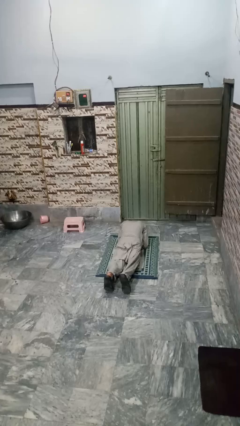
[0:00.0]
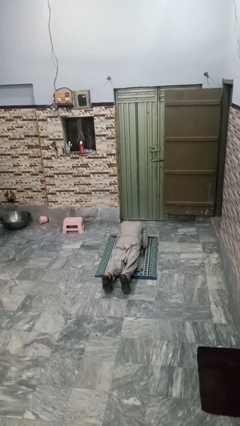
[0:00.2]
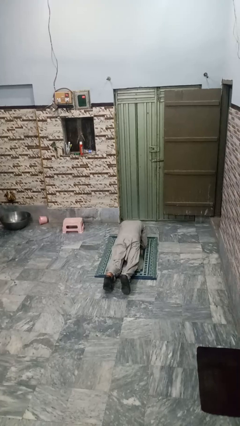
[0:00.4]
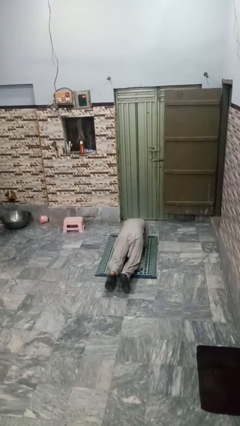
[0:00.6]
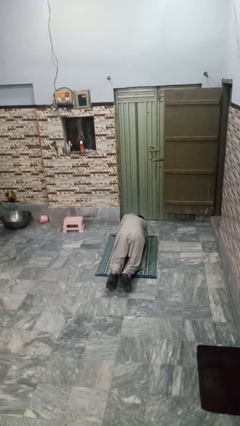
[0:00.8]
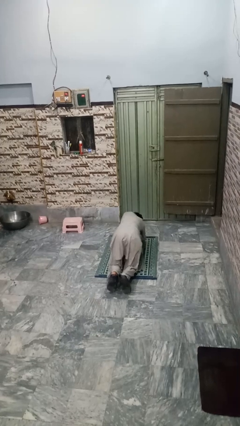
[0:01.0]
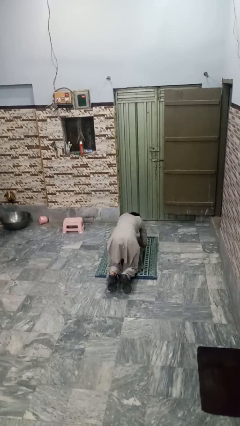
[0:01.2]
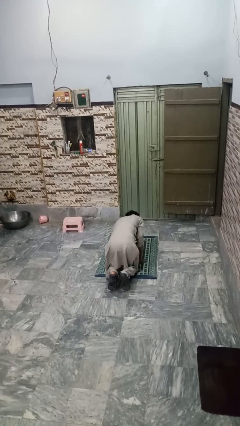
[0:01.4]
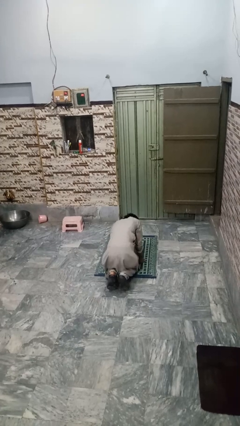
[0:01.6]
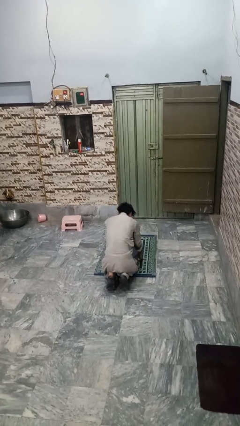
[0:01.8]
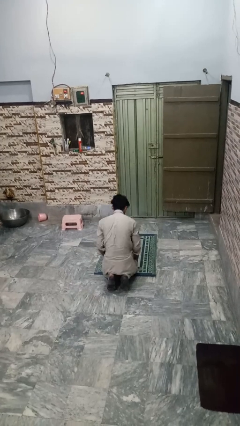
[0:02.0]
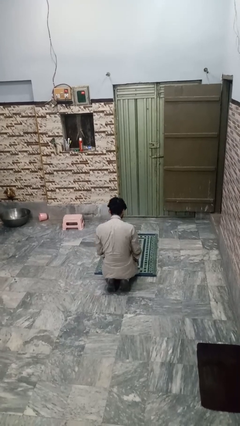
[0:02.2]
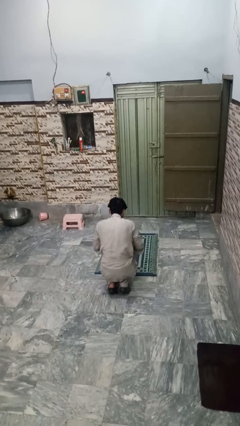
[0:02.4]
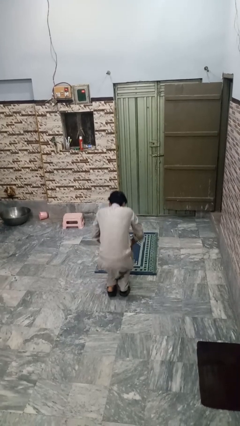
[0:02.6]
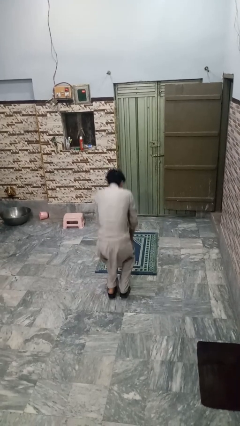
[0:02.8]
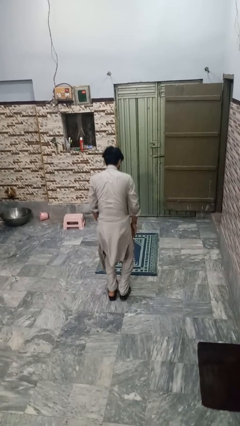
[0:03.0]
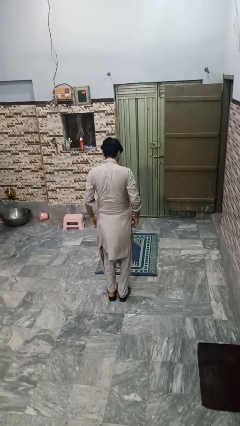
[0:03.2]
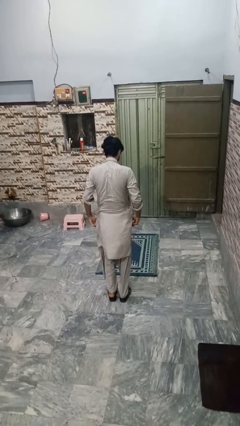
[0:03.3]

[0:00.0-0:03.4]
person stands up from floor

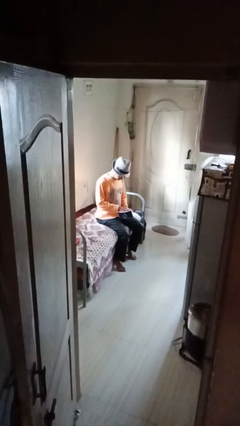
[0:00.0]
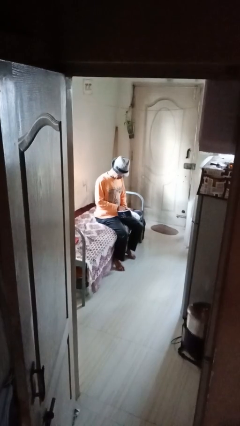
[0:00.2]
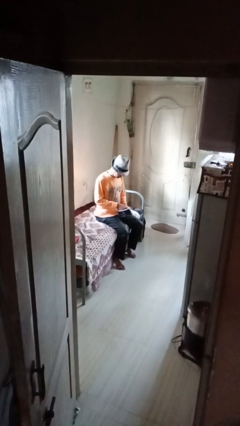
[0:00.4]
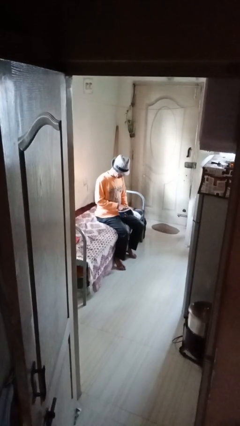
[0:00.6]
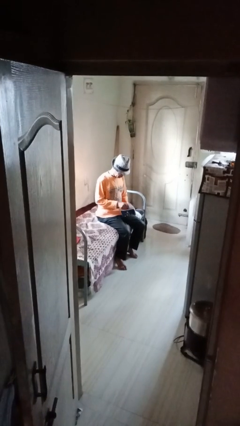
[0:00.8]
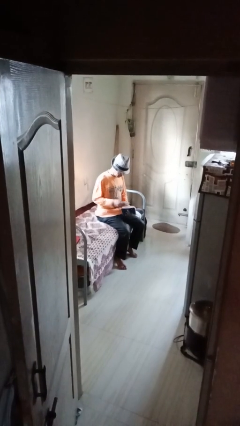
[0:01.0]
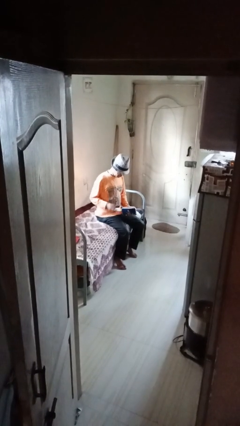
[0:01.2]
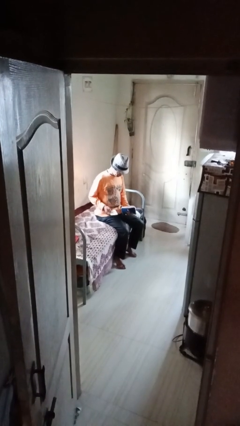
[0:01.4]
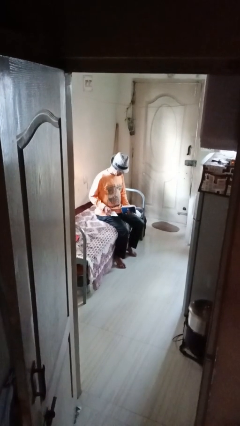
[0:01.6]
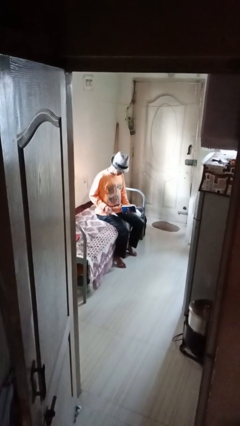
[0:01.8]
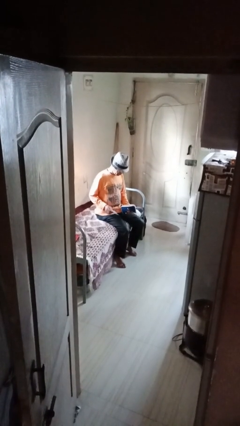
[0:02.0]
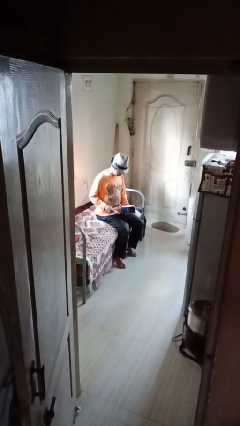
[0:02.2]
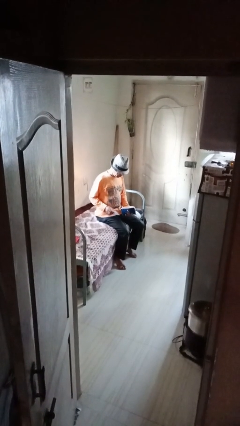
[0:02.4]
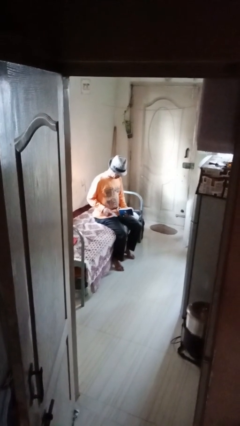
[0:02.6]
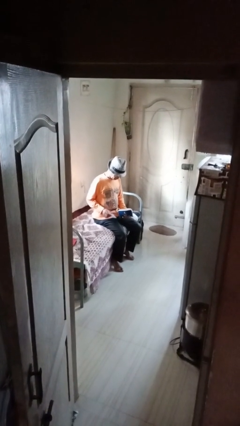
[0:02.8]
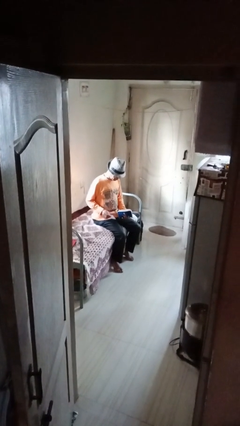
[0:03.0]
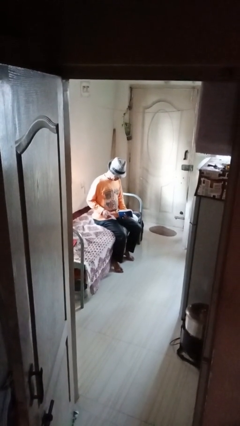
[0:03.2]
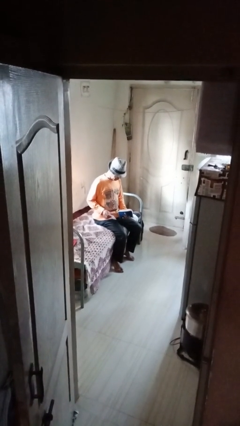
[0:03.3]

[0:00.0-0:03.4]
person takes object from purse

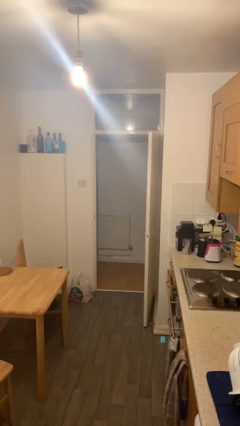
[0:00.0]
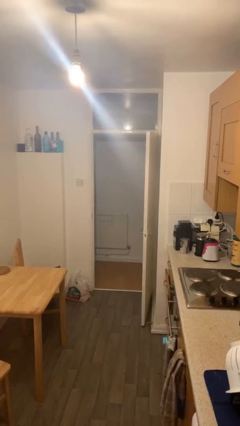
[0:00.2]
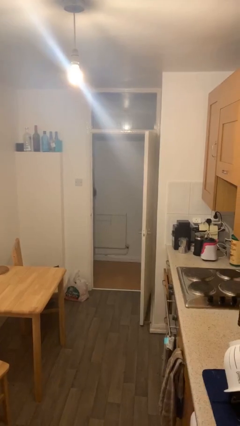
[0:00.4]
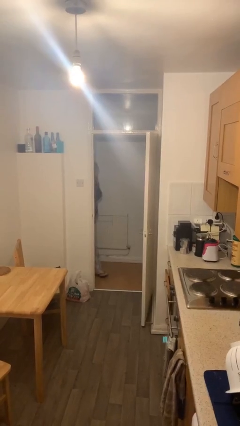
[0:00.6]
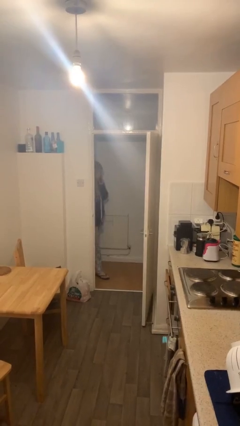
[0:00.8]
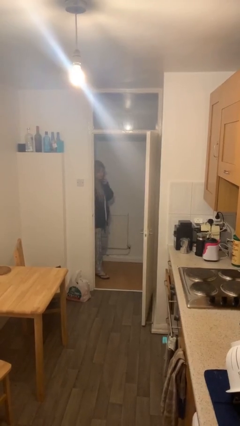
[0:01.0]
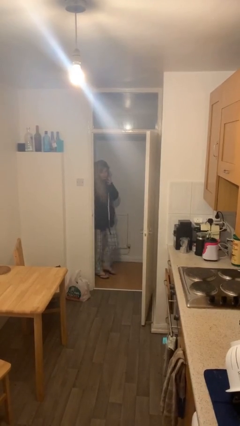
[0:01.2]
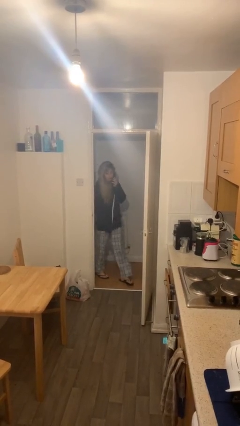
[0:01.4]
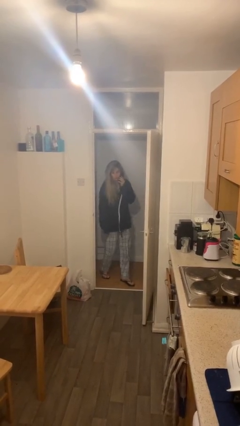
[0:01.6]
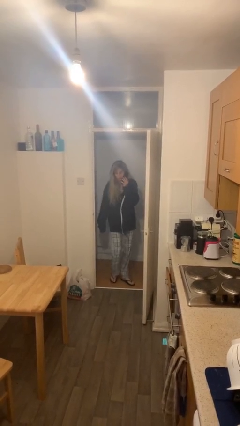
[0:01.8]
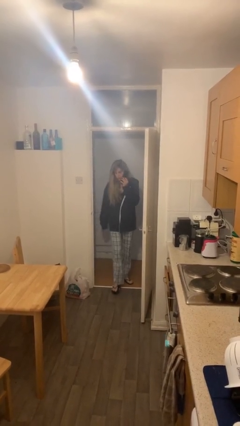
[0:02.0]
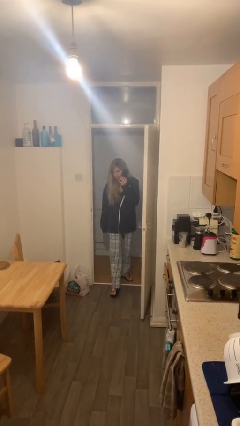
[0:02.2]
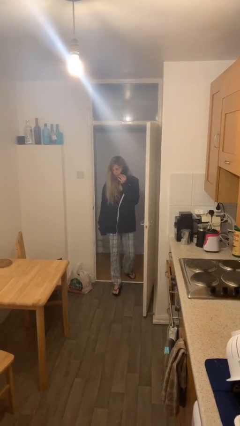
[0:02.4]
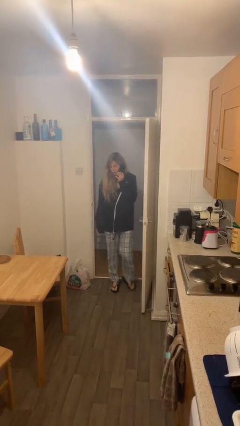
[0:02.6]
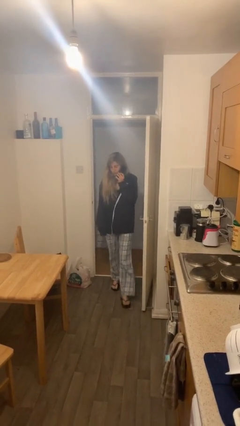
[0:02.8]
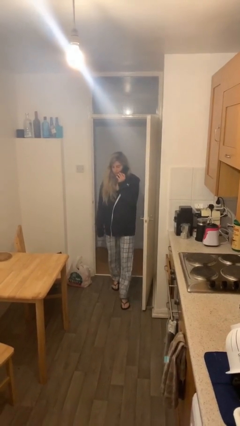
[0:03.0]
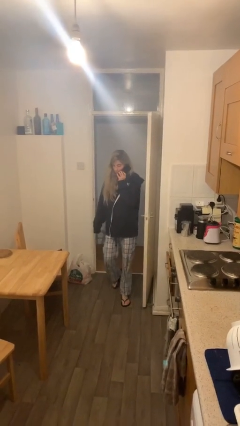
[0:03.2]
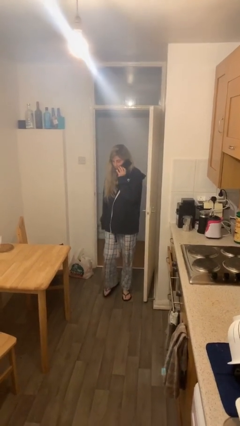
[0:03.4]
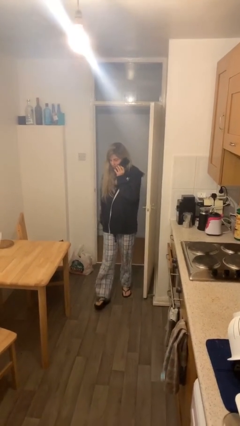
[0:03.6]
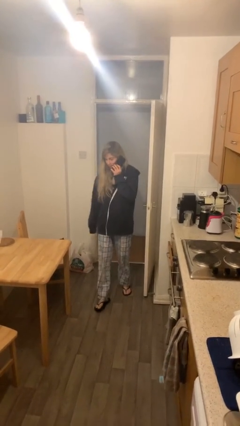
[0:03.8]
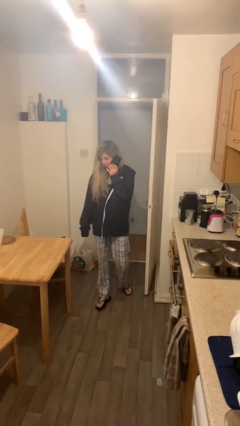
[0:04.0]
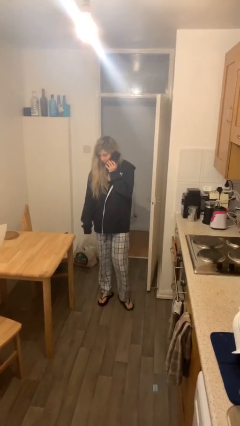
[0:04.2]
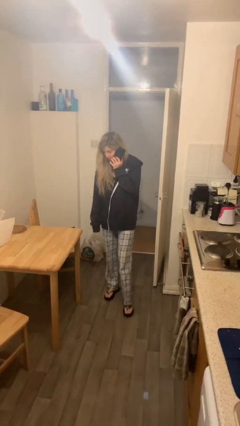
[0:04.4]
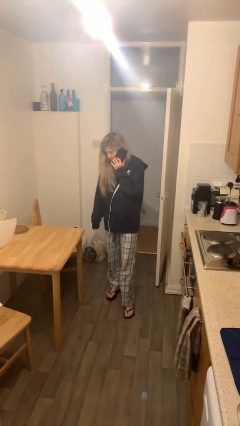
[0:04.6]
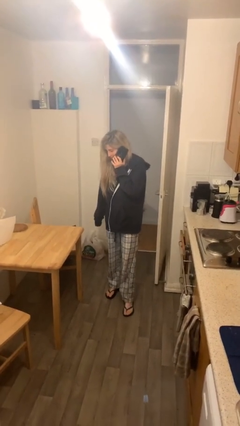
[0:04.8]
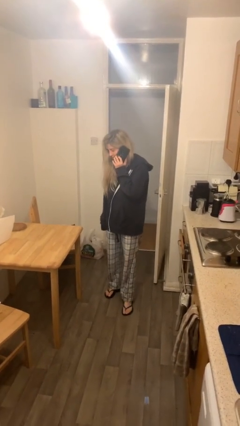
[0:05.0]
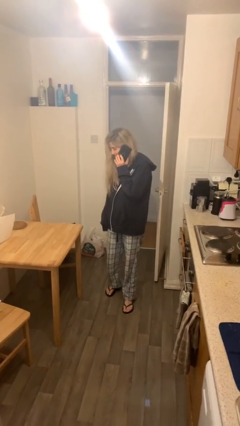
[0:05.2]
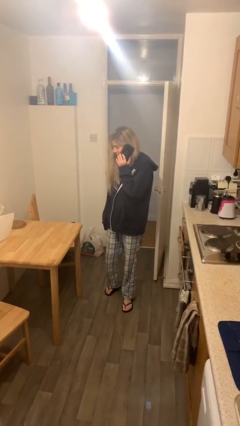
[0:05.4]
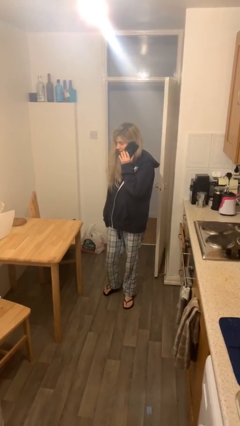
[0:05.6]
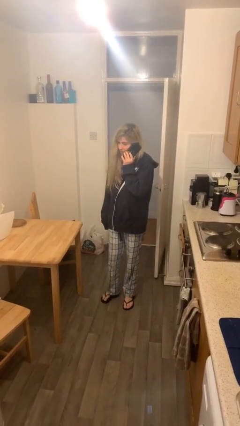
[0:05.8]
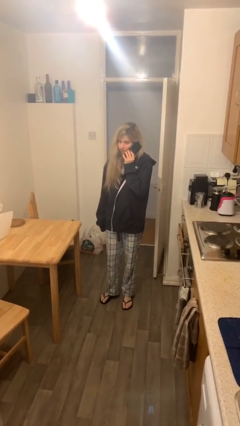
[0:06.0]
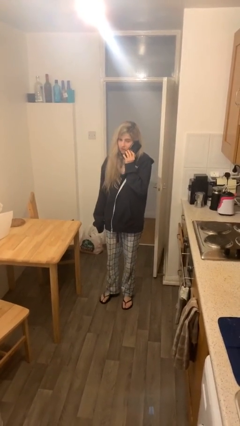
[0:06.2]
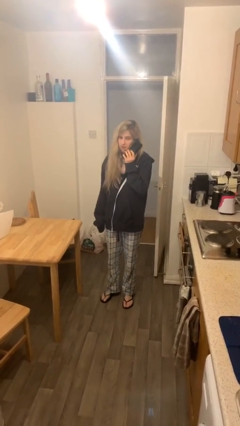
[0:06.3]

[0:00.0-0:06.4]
person enters scene through structure

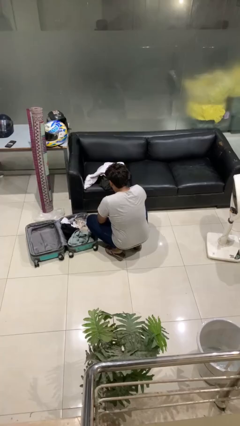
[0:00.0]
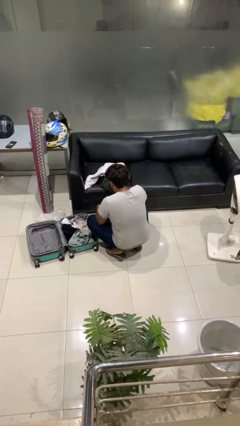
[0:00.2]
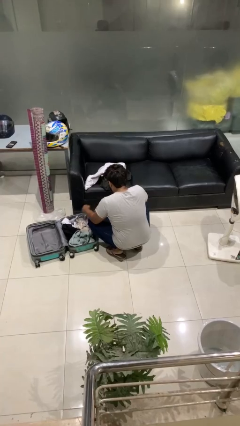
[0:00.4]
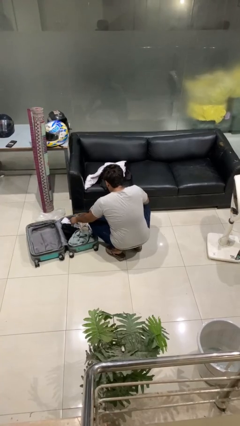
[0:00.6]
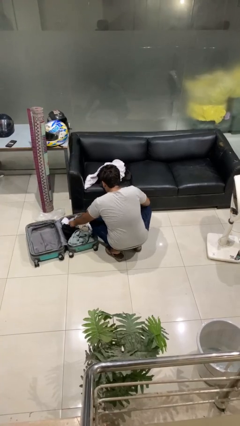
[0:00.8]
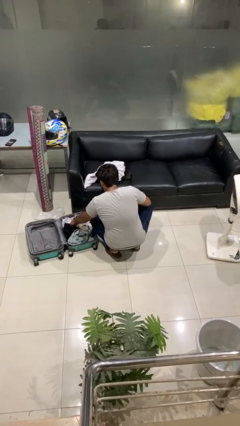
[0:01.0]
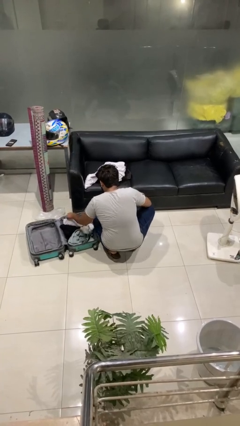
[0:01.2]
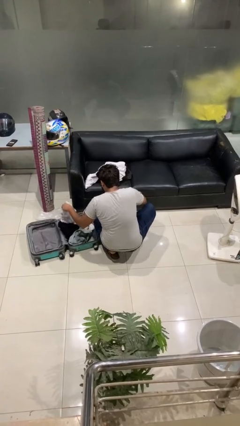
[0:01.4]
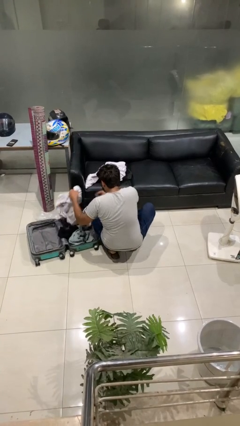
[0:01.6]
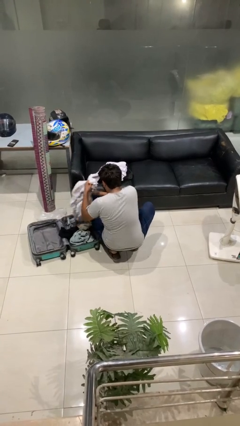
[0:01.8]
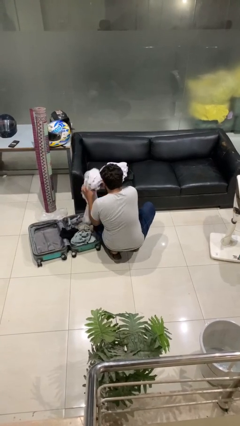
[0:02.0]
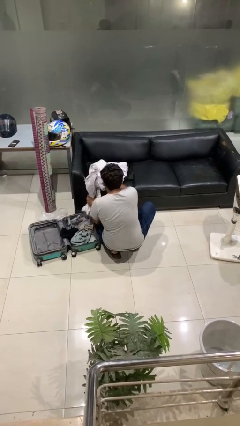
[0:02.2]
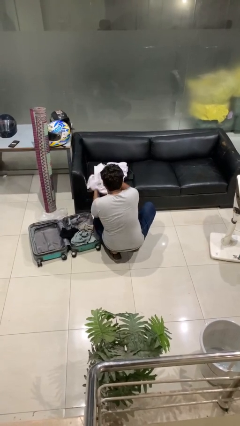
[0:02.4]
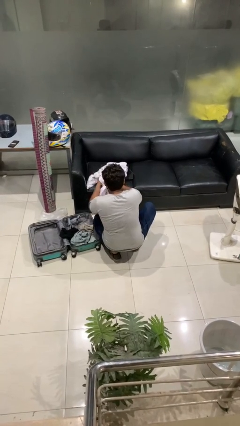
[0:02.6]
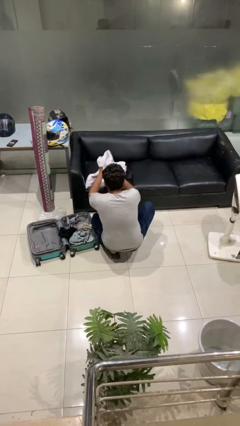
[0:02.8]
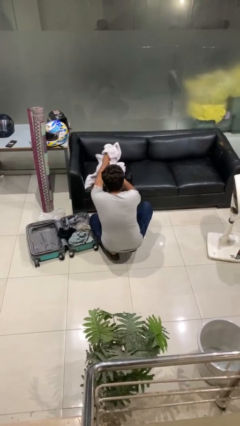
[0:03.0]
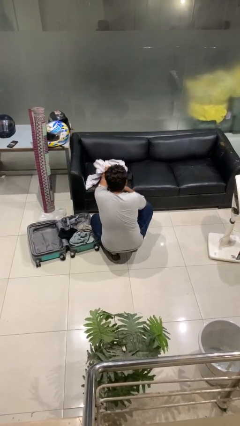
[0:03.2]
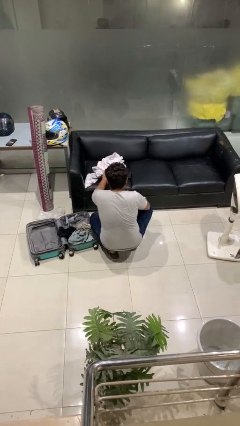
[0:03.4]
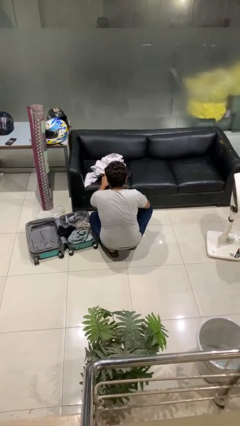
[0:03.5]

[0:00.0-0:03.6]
person unloads clothes from suitcase

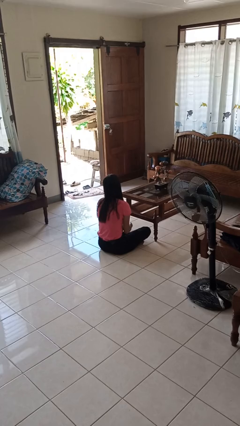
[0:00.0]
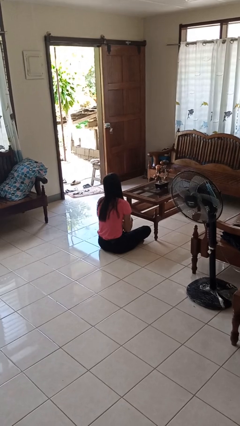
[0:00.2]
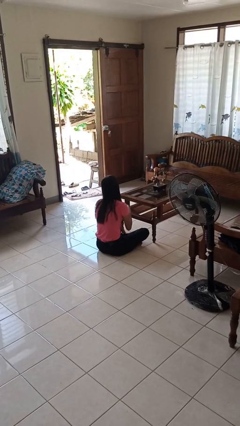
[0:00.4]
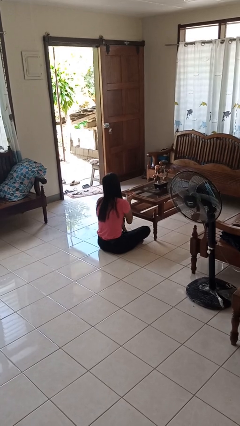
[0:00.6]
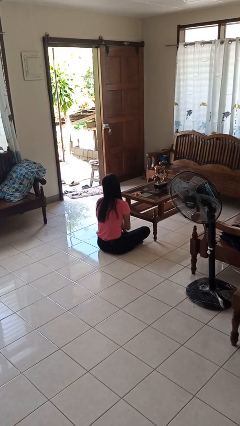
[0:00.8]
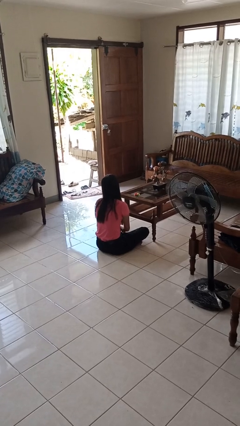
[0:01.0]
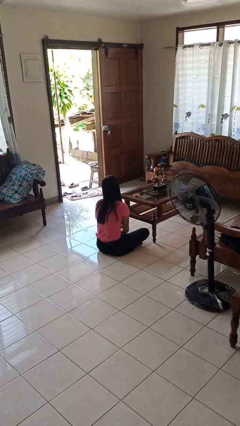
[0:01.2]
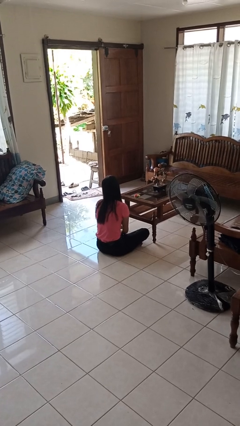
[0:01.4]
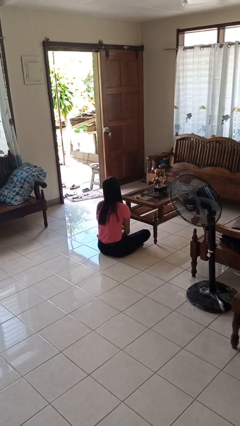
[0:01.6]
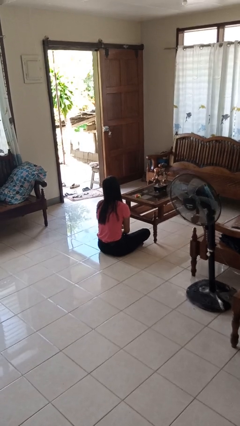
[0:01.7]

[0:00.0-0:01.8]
person throws object on table
